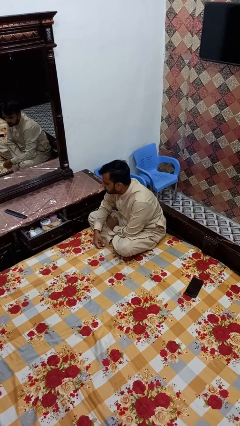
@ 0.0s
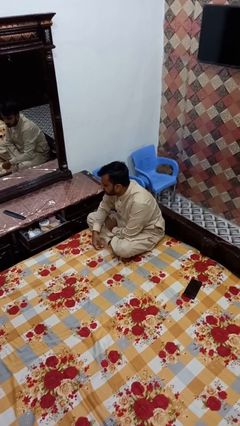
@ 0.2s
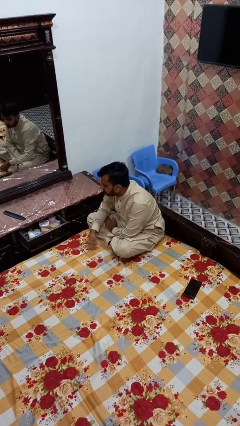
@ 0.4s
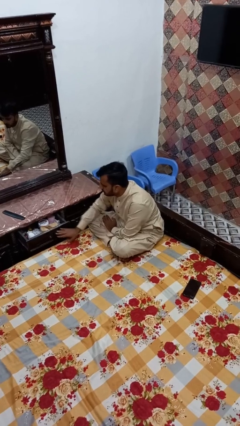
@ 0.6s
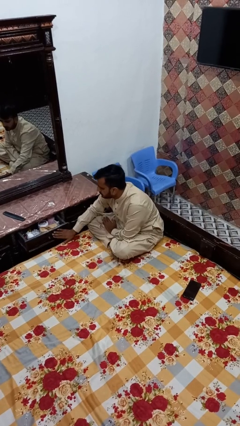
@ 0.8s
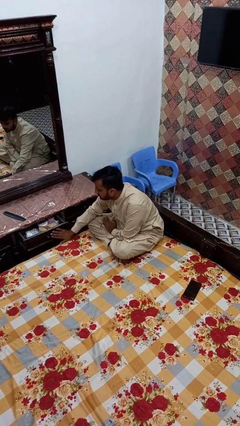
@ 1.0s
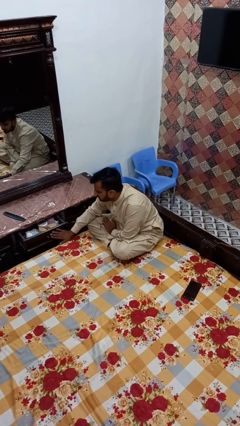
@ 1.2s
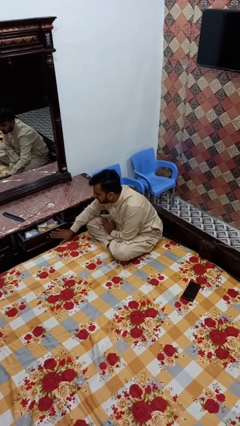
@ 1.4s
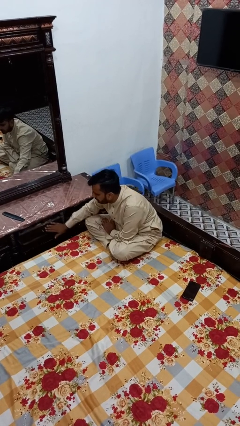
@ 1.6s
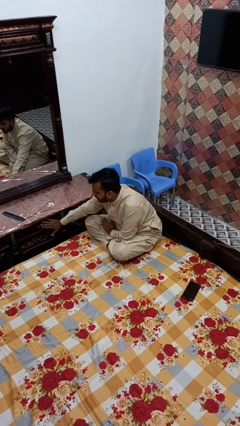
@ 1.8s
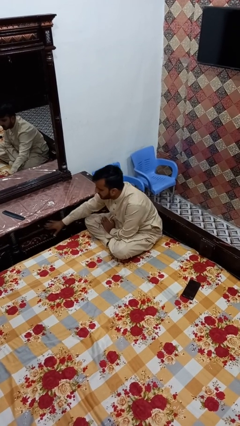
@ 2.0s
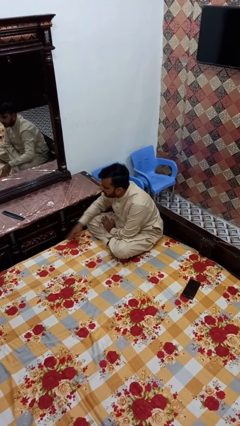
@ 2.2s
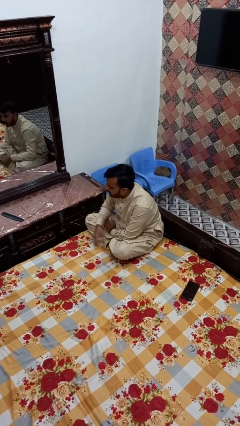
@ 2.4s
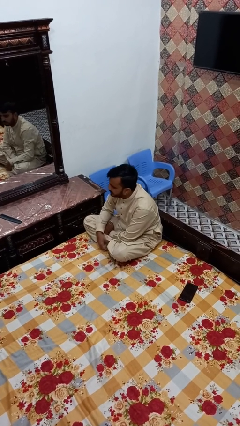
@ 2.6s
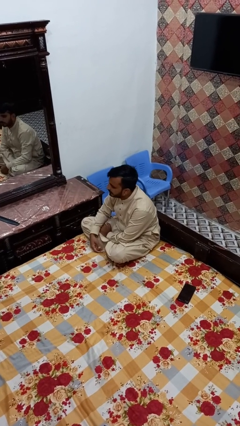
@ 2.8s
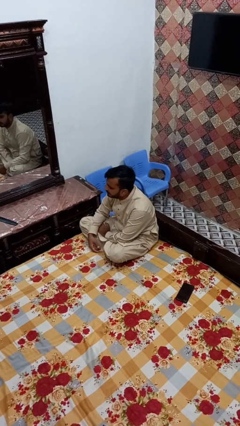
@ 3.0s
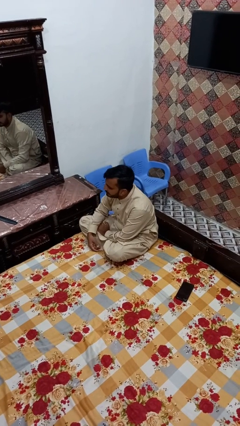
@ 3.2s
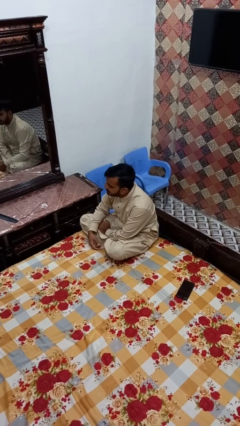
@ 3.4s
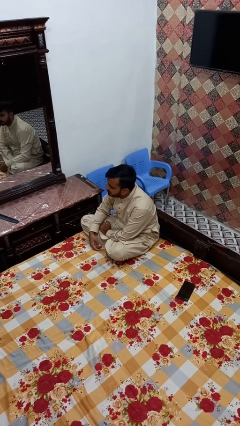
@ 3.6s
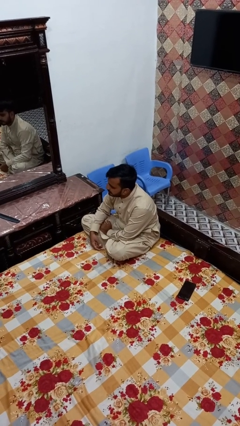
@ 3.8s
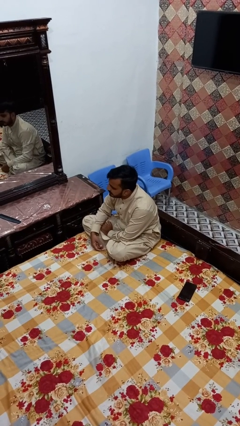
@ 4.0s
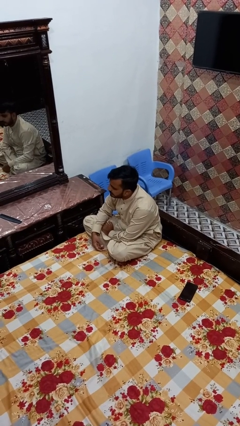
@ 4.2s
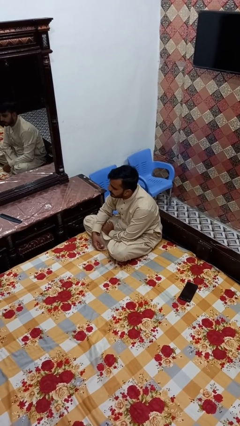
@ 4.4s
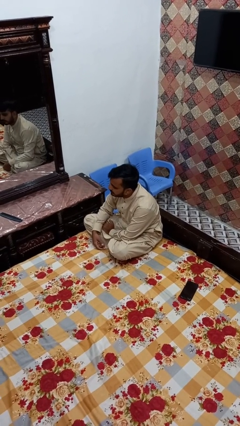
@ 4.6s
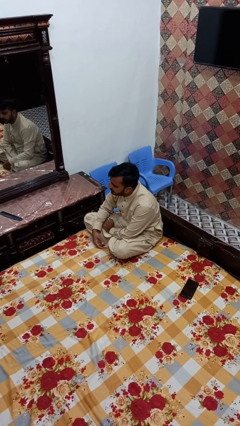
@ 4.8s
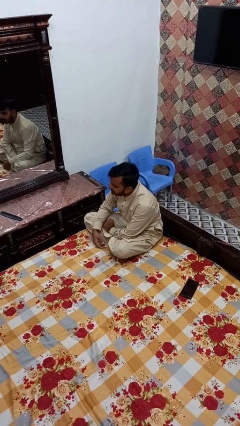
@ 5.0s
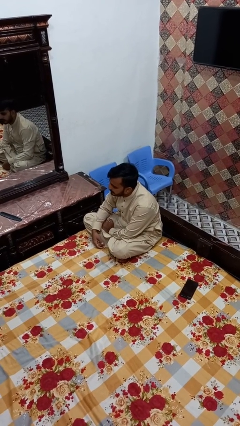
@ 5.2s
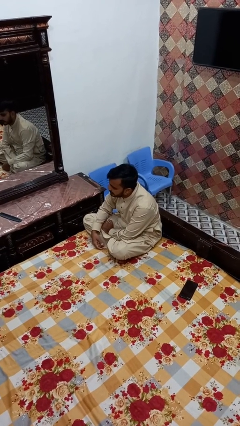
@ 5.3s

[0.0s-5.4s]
person closes dresser drawer

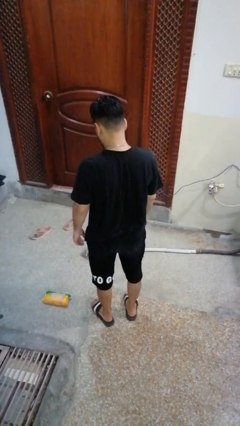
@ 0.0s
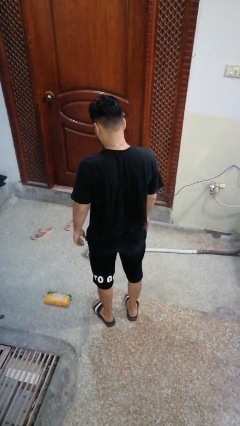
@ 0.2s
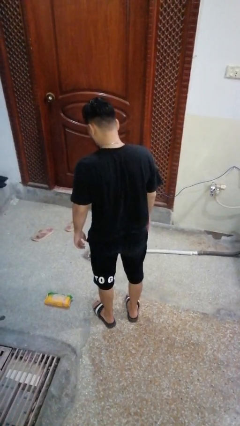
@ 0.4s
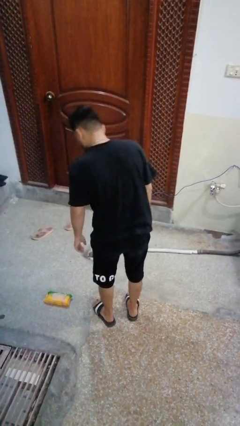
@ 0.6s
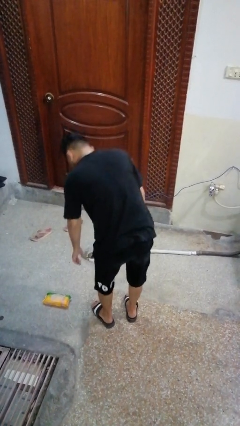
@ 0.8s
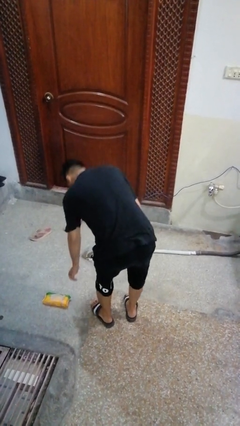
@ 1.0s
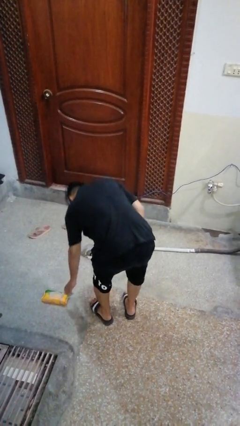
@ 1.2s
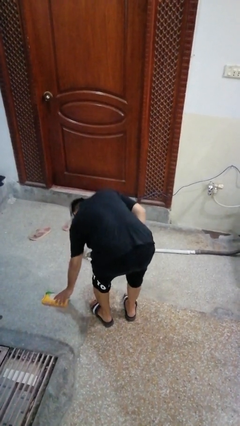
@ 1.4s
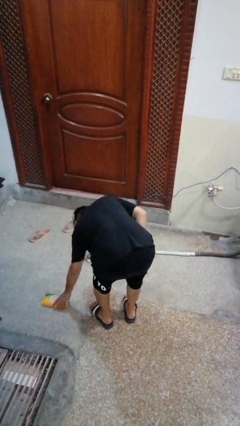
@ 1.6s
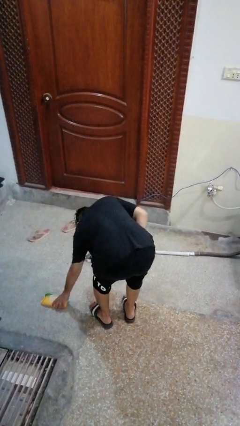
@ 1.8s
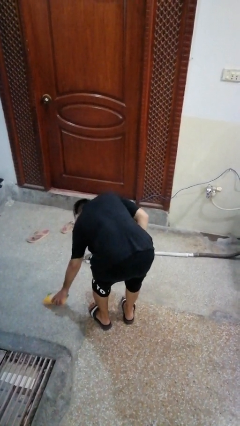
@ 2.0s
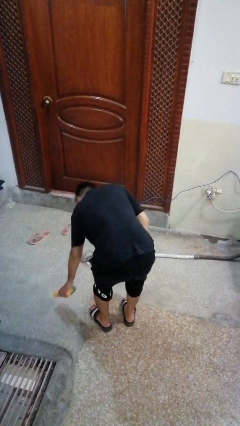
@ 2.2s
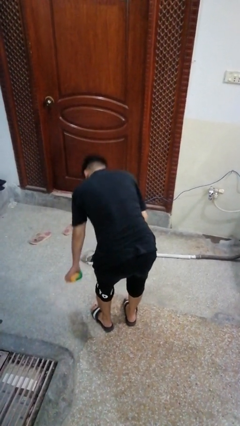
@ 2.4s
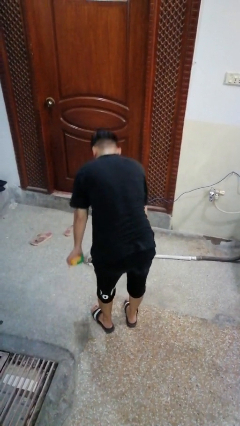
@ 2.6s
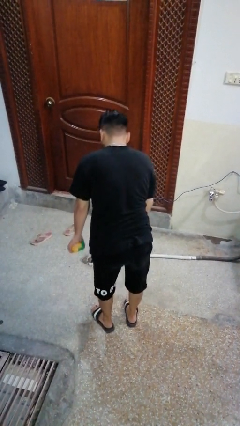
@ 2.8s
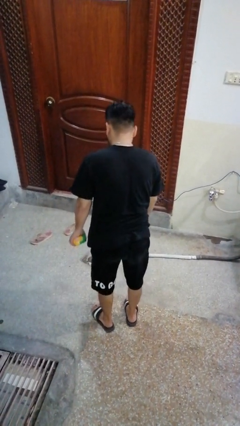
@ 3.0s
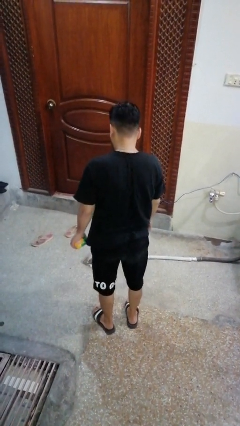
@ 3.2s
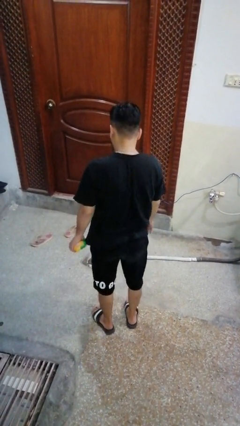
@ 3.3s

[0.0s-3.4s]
person picks up object from floor

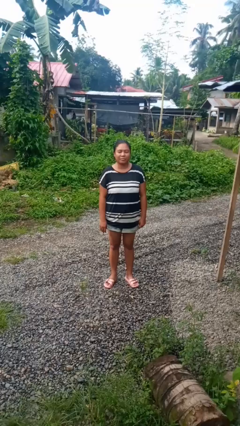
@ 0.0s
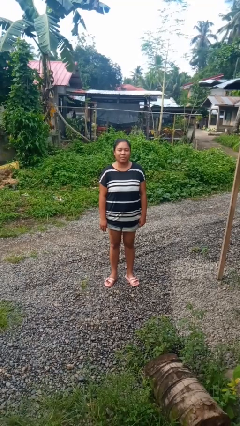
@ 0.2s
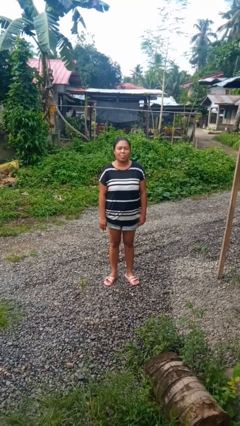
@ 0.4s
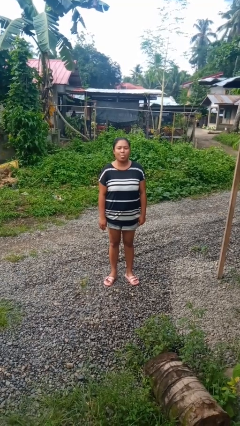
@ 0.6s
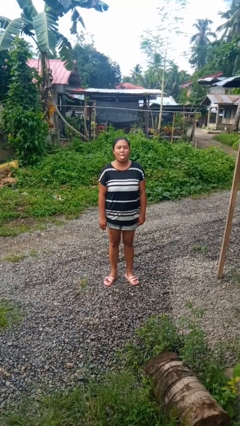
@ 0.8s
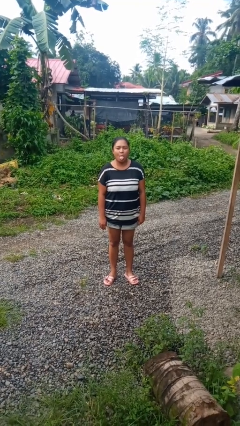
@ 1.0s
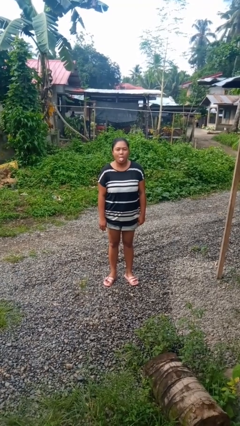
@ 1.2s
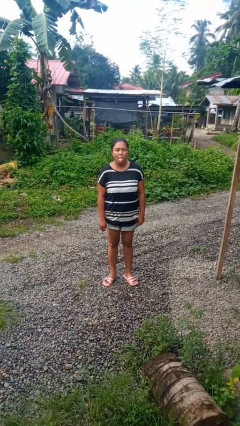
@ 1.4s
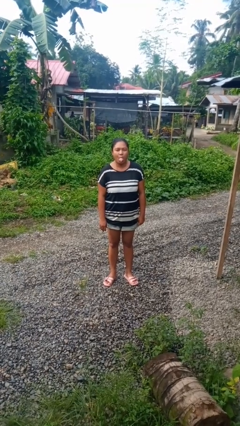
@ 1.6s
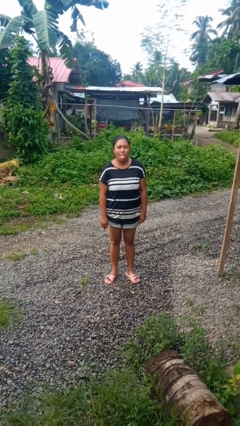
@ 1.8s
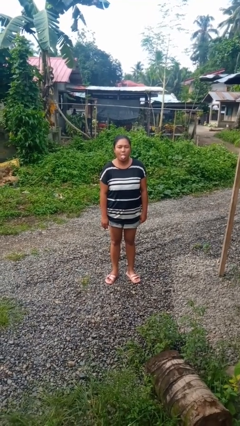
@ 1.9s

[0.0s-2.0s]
person sticks out tongue

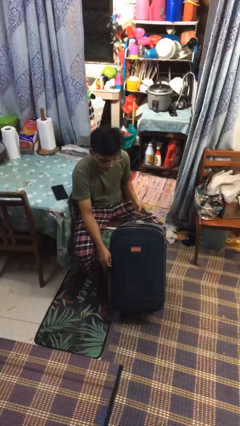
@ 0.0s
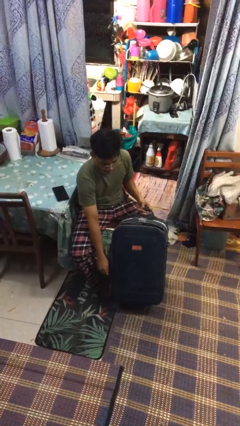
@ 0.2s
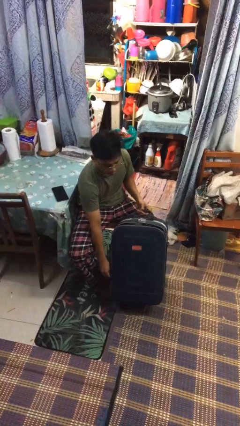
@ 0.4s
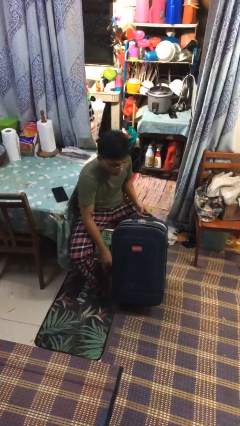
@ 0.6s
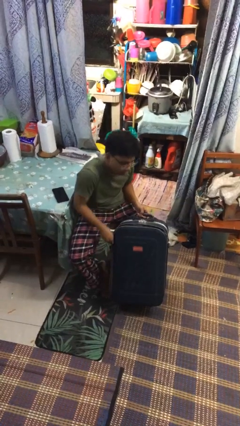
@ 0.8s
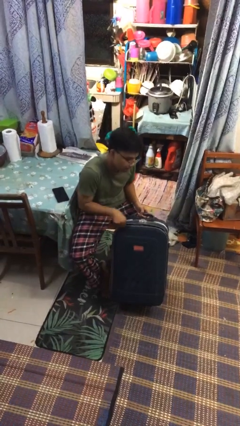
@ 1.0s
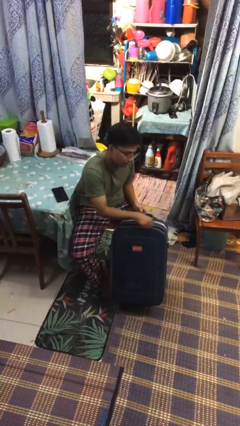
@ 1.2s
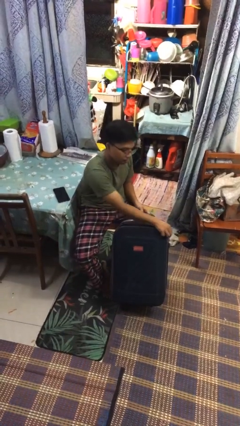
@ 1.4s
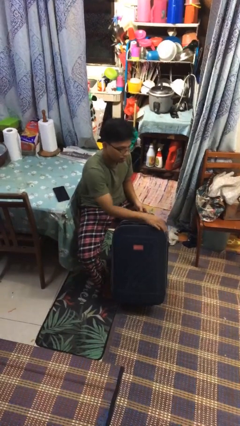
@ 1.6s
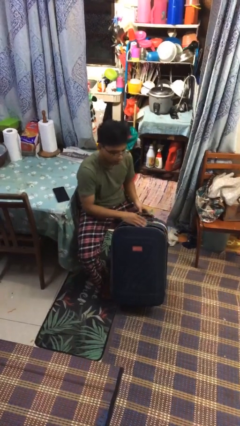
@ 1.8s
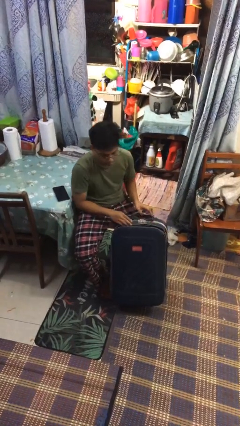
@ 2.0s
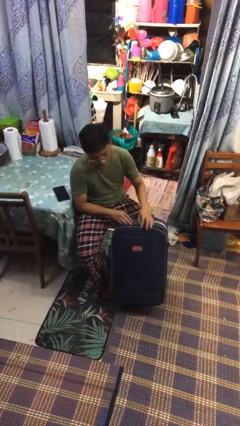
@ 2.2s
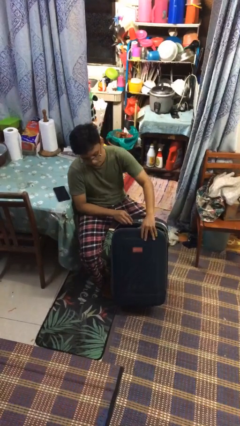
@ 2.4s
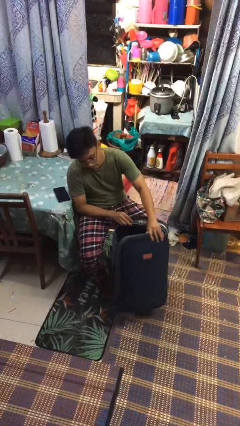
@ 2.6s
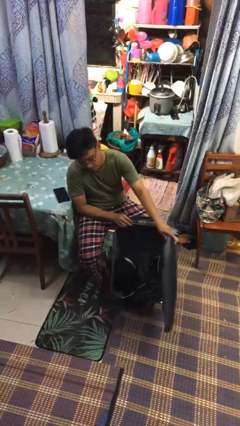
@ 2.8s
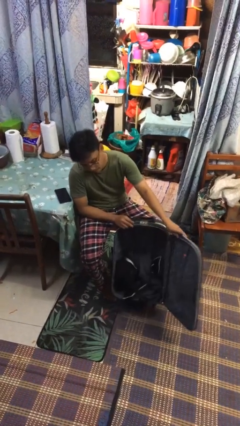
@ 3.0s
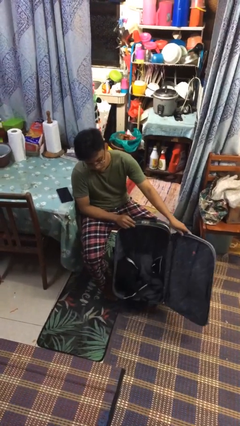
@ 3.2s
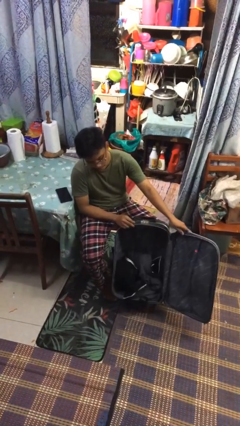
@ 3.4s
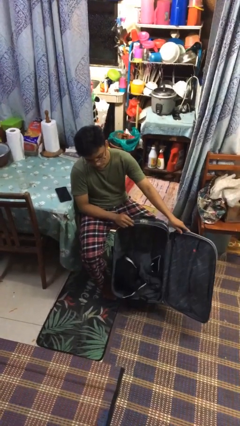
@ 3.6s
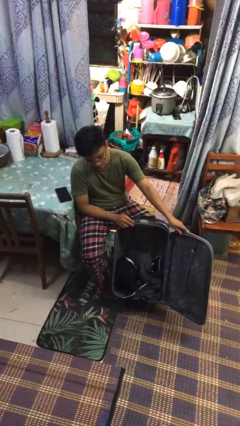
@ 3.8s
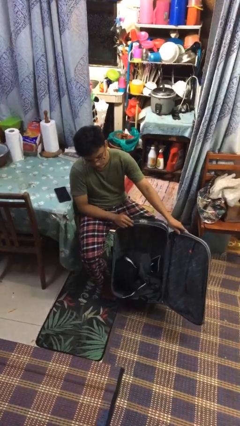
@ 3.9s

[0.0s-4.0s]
person opens suitcase

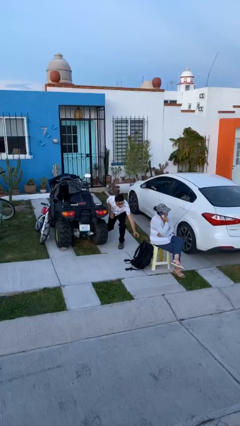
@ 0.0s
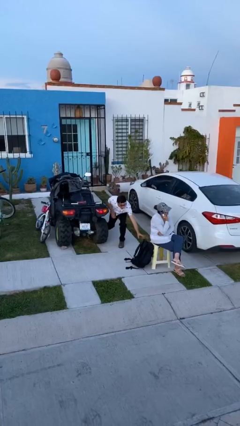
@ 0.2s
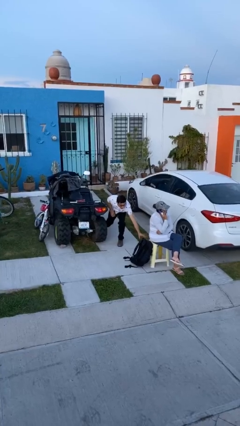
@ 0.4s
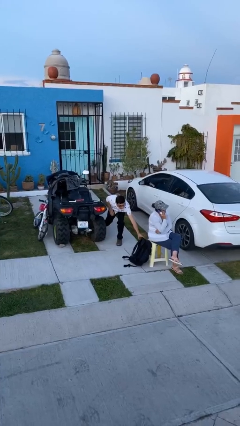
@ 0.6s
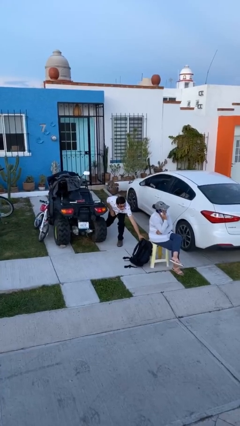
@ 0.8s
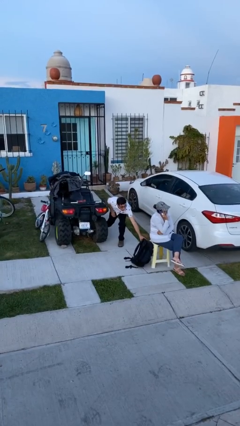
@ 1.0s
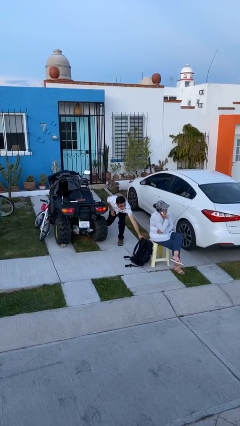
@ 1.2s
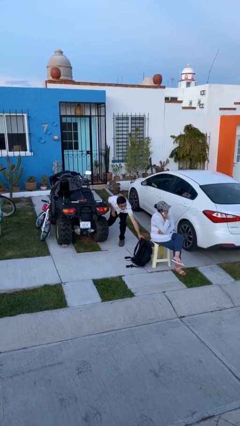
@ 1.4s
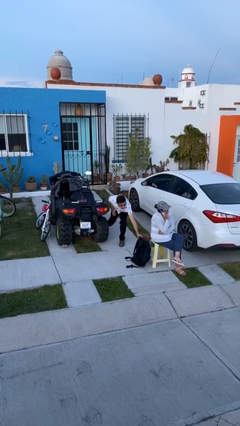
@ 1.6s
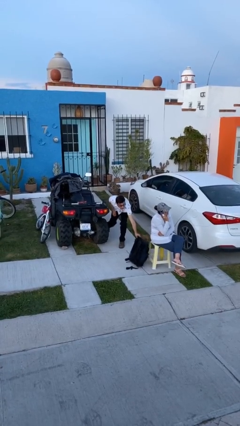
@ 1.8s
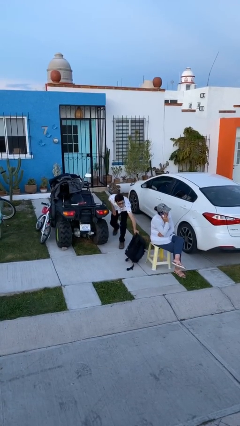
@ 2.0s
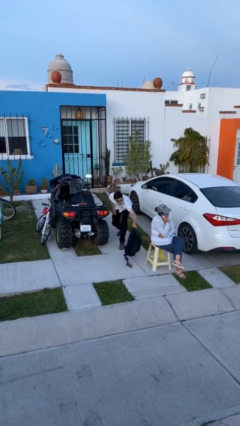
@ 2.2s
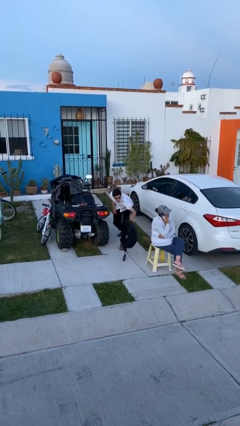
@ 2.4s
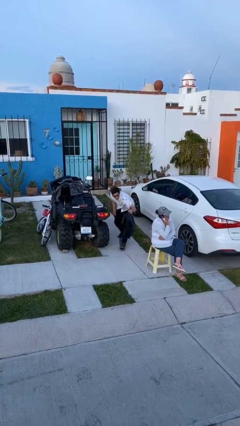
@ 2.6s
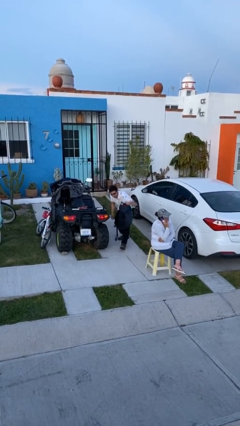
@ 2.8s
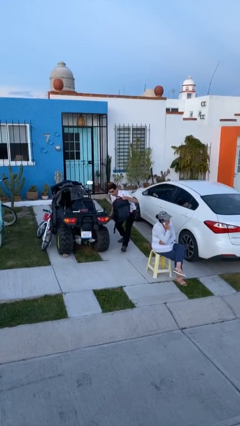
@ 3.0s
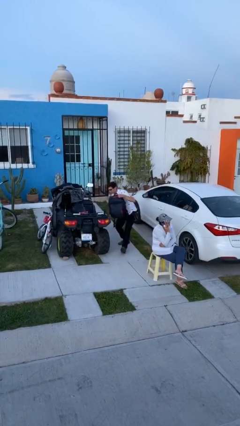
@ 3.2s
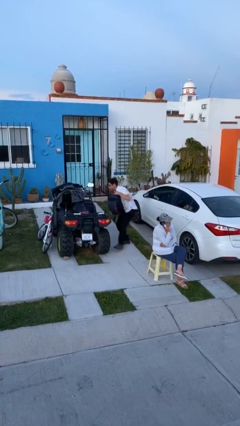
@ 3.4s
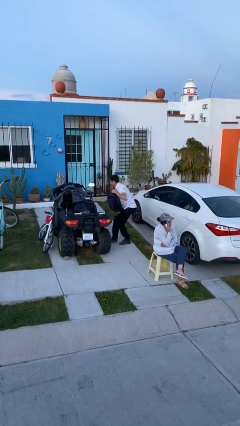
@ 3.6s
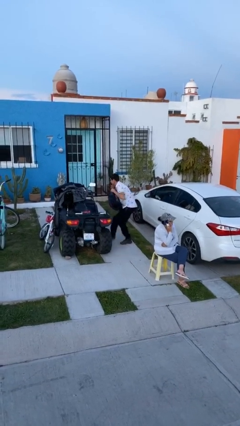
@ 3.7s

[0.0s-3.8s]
person steals object from person
